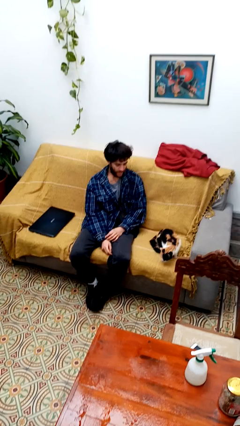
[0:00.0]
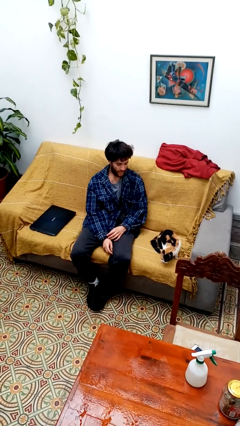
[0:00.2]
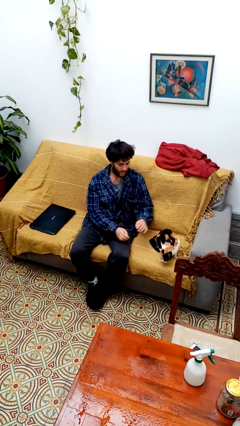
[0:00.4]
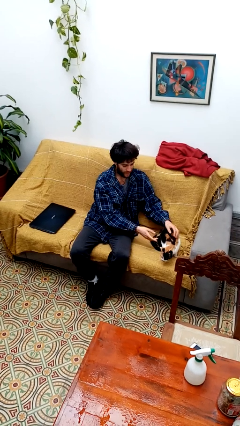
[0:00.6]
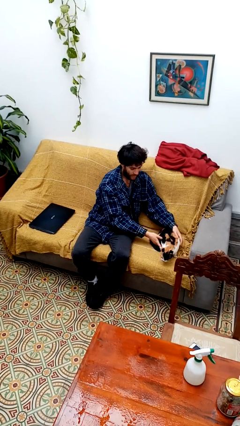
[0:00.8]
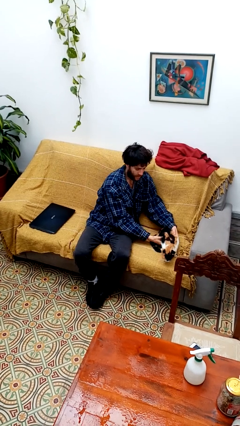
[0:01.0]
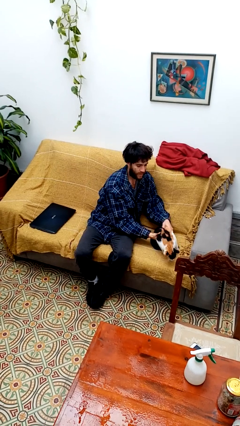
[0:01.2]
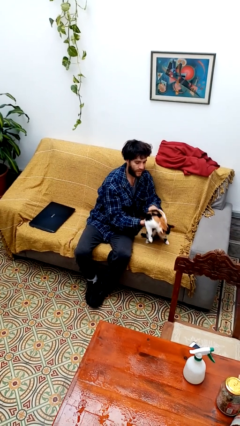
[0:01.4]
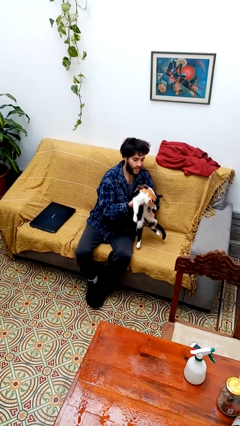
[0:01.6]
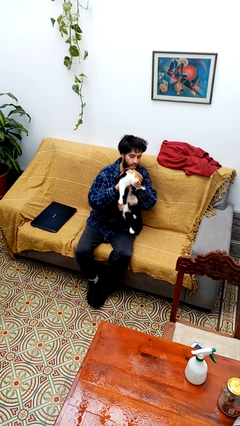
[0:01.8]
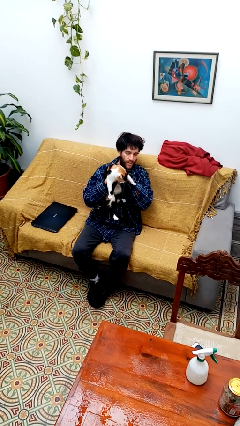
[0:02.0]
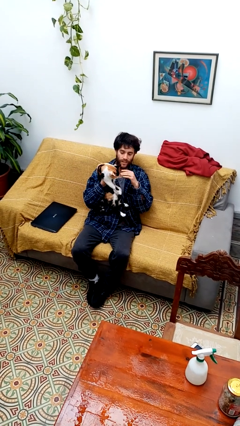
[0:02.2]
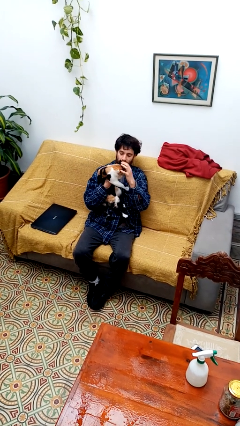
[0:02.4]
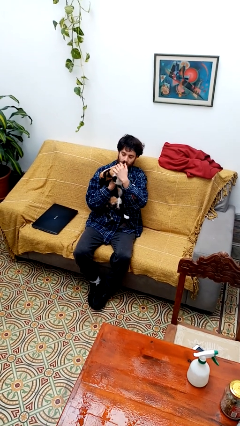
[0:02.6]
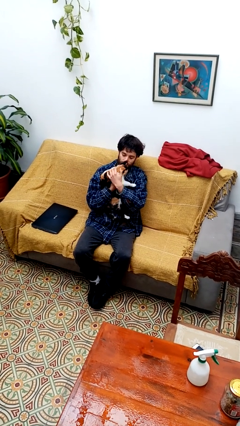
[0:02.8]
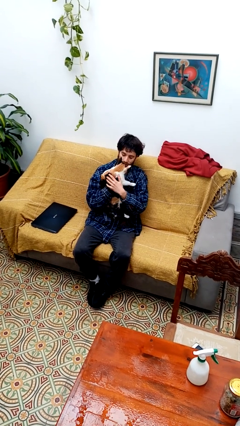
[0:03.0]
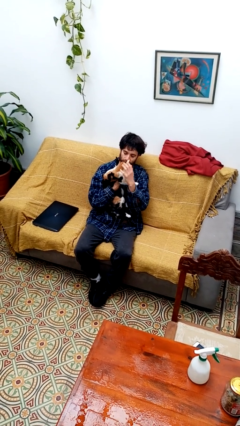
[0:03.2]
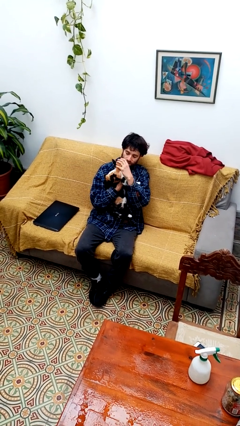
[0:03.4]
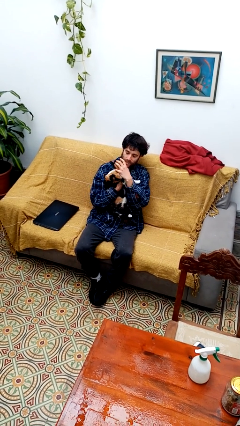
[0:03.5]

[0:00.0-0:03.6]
person hugs cat

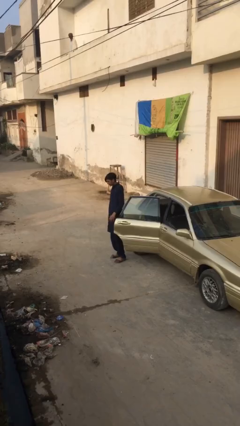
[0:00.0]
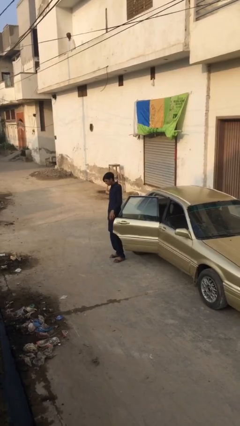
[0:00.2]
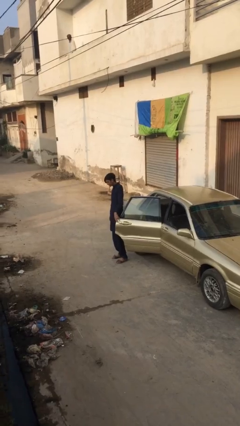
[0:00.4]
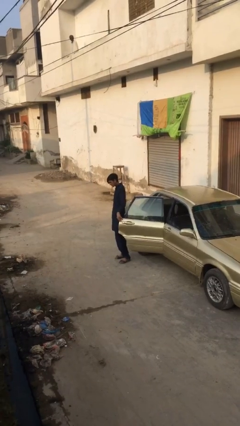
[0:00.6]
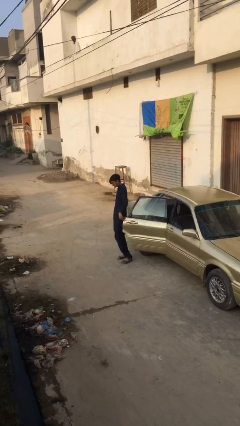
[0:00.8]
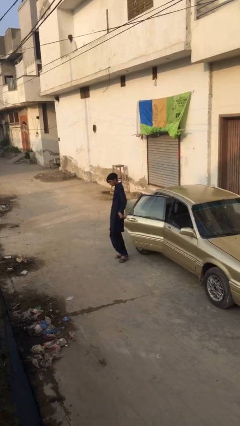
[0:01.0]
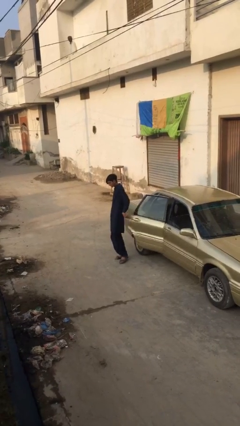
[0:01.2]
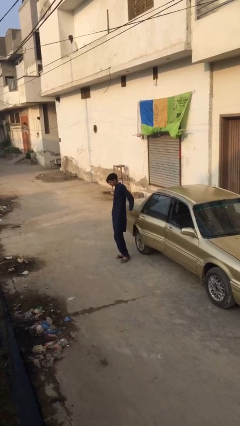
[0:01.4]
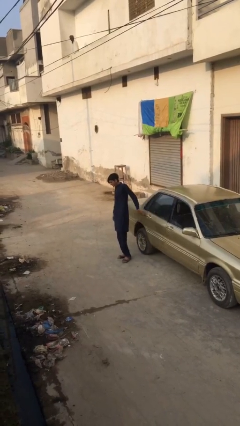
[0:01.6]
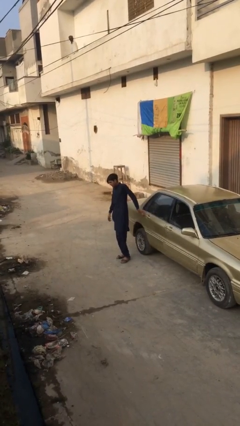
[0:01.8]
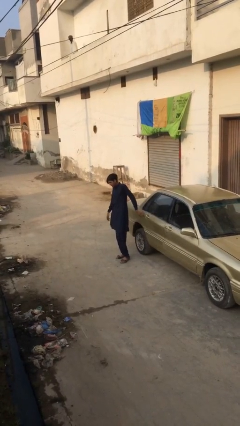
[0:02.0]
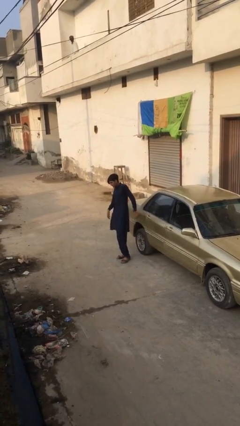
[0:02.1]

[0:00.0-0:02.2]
person closes car door

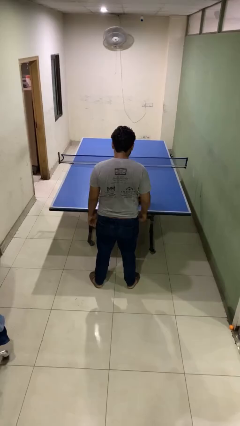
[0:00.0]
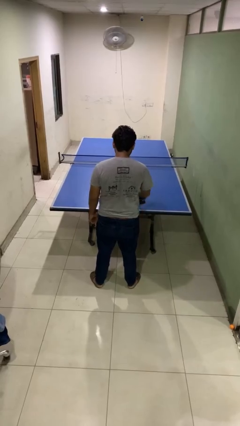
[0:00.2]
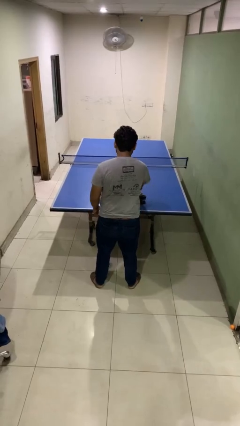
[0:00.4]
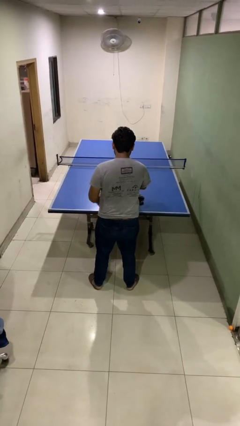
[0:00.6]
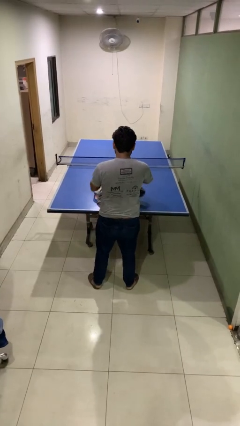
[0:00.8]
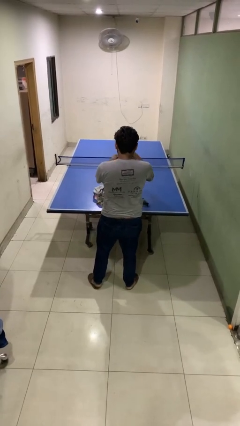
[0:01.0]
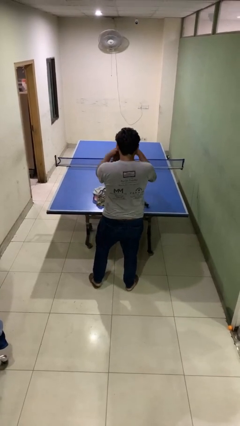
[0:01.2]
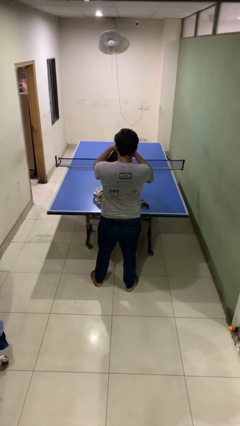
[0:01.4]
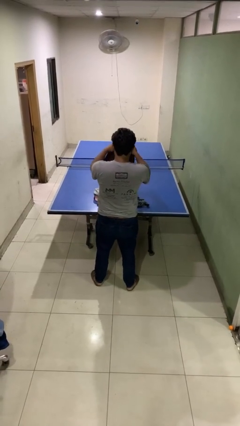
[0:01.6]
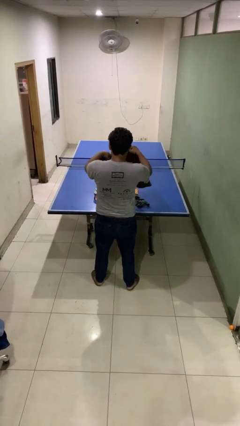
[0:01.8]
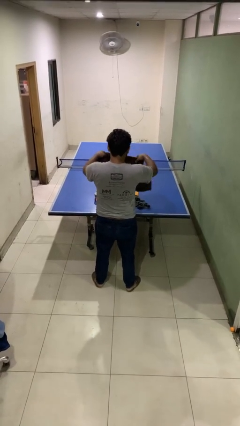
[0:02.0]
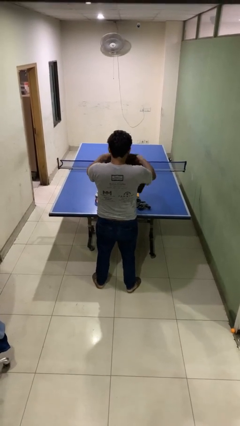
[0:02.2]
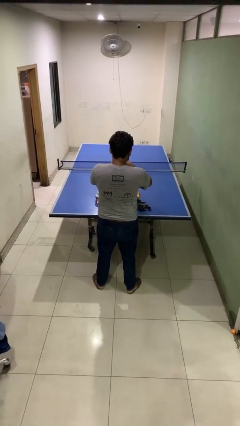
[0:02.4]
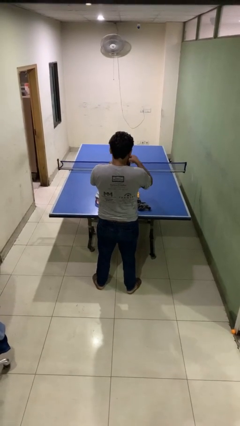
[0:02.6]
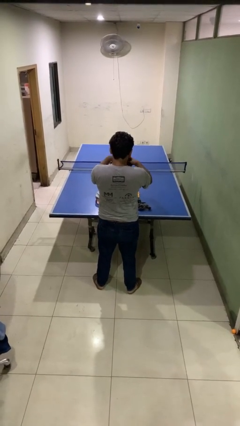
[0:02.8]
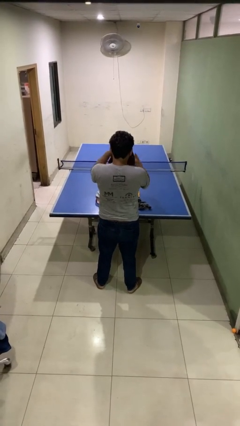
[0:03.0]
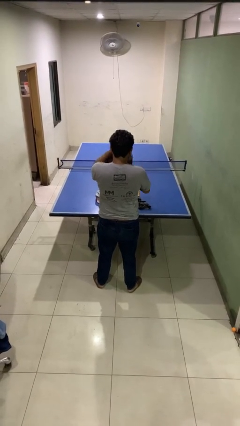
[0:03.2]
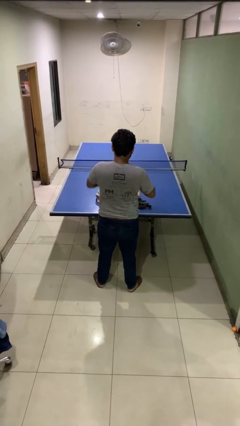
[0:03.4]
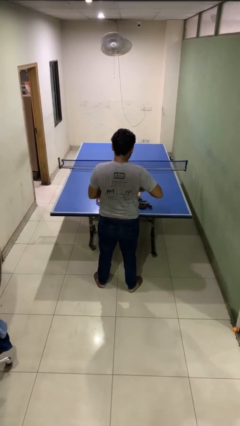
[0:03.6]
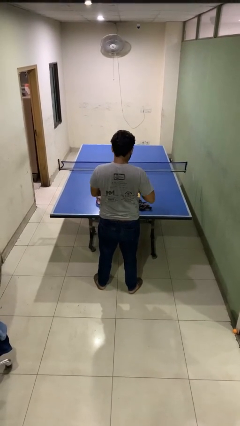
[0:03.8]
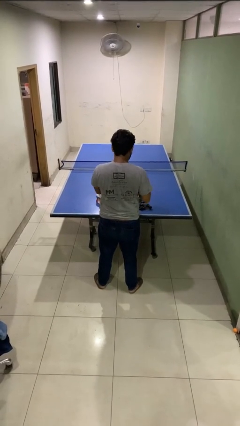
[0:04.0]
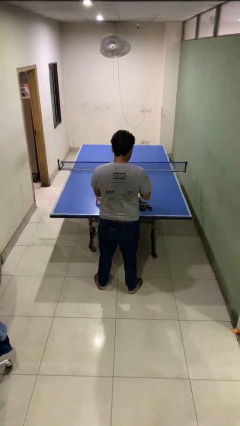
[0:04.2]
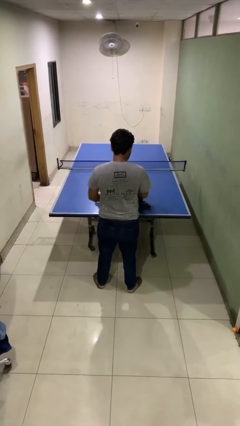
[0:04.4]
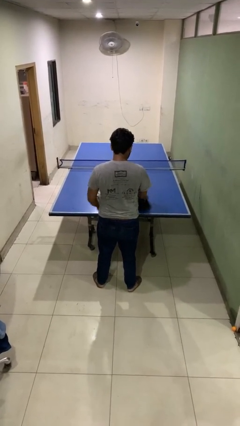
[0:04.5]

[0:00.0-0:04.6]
person folds shirt

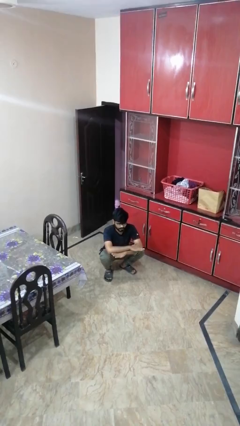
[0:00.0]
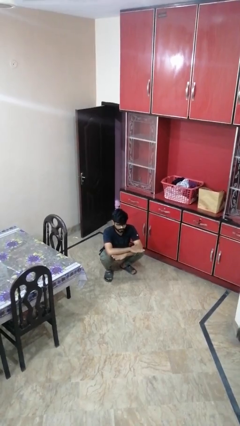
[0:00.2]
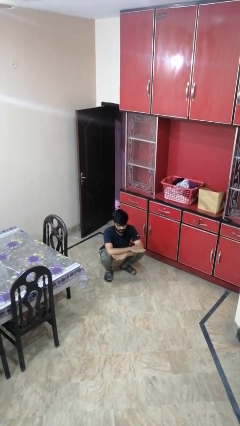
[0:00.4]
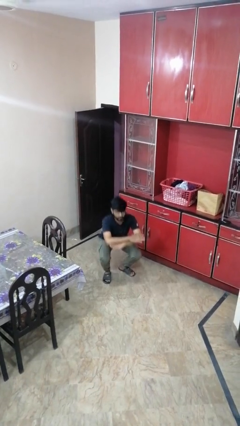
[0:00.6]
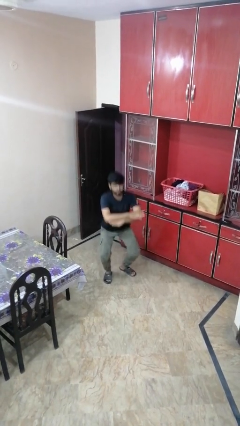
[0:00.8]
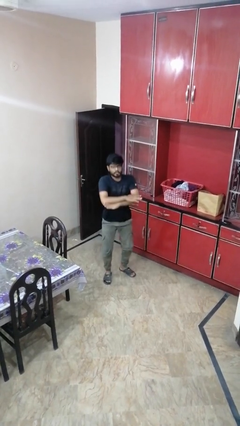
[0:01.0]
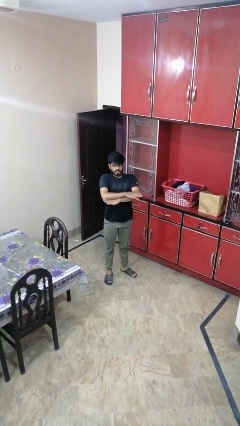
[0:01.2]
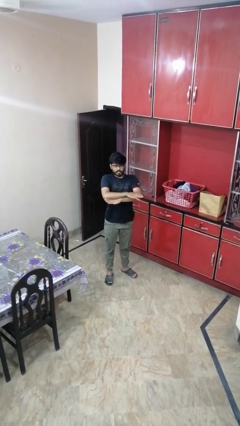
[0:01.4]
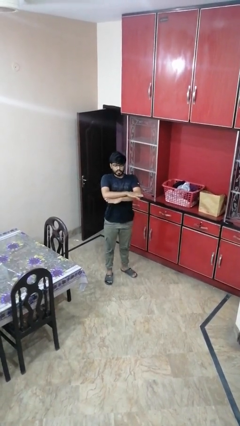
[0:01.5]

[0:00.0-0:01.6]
person stands up

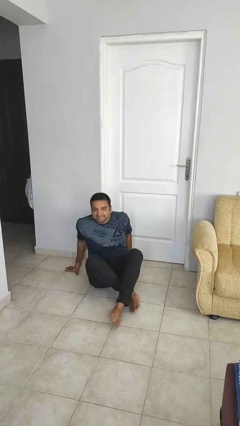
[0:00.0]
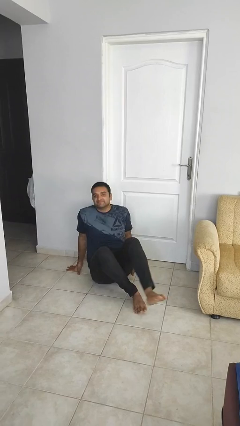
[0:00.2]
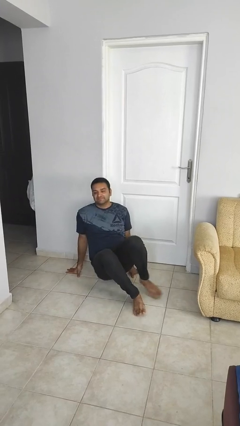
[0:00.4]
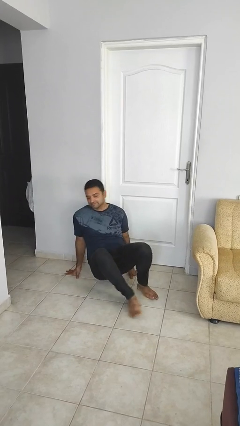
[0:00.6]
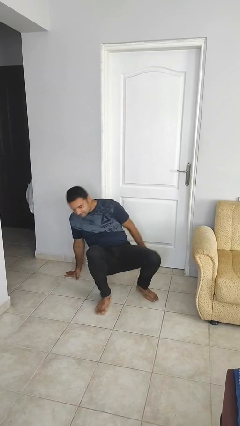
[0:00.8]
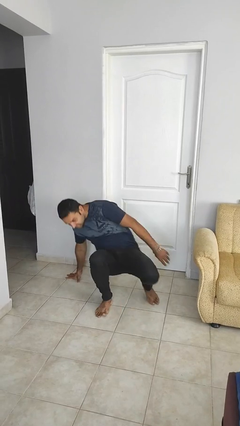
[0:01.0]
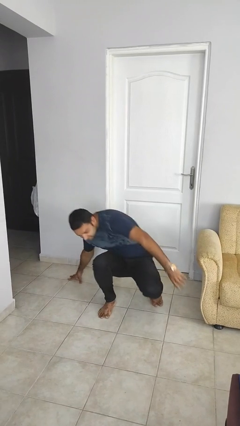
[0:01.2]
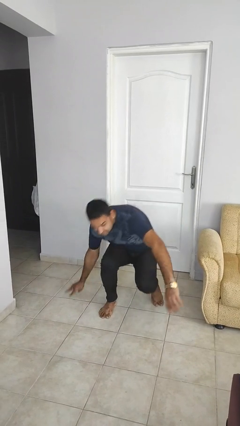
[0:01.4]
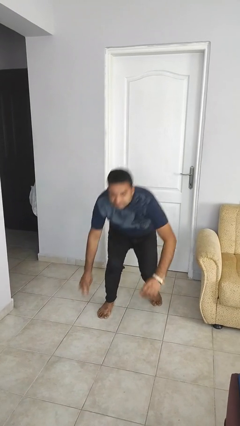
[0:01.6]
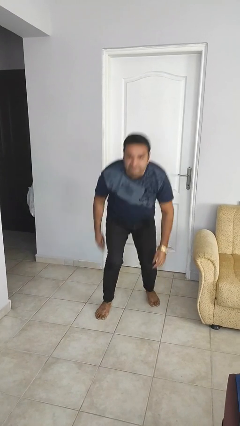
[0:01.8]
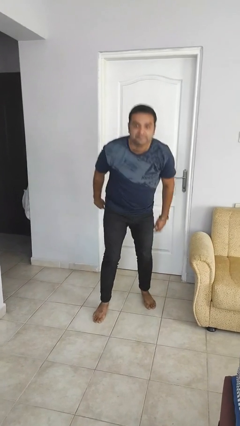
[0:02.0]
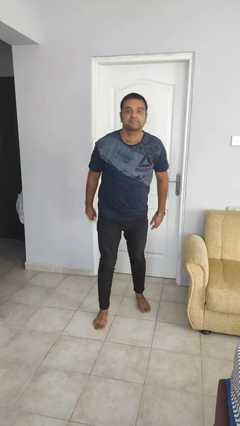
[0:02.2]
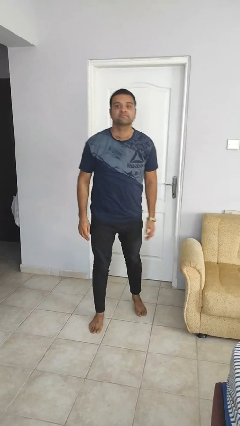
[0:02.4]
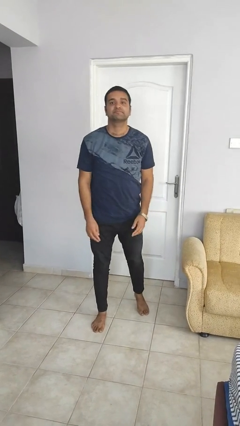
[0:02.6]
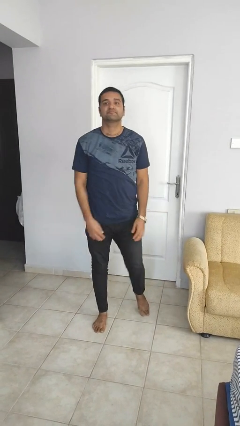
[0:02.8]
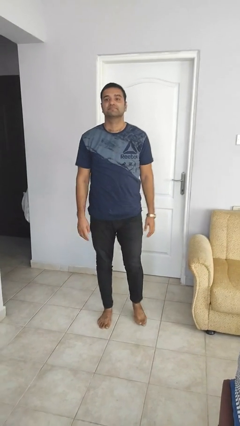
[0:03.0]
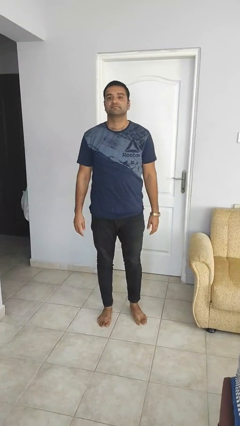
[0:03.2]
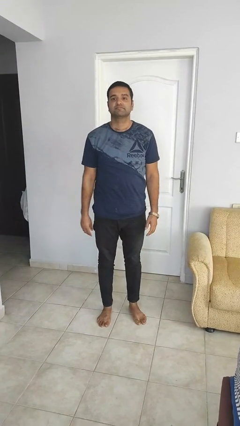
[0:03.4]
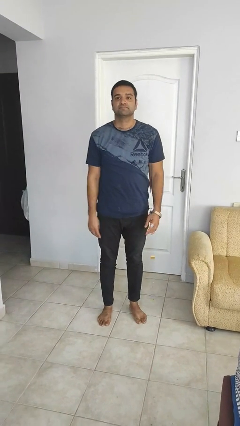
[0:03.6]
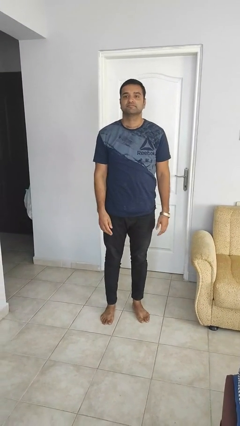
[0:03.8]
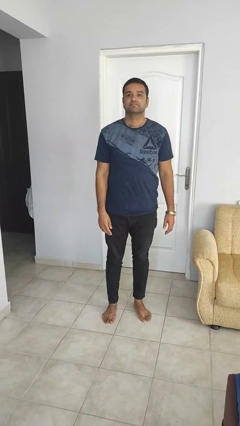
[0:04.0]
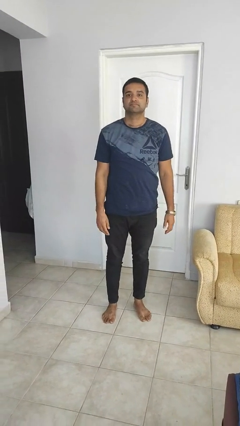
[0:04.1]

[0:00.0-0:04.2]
person stands up from floor

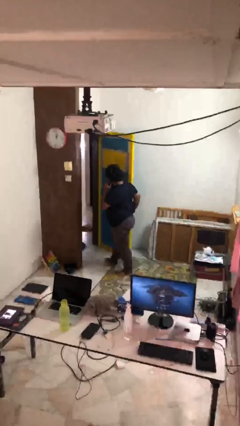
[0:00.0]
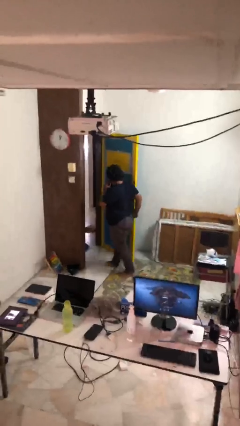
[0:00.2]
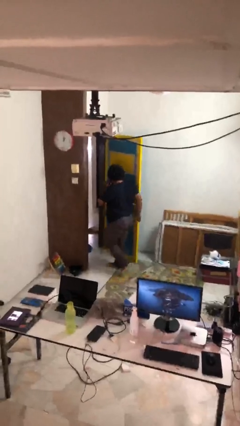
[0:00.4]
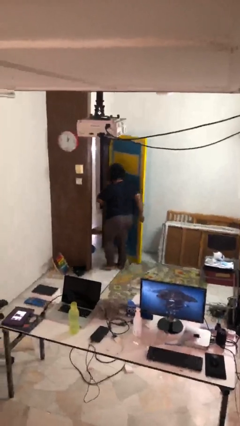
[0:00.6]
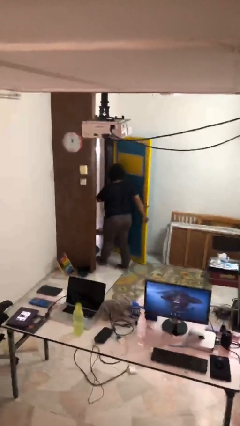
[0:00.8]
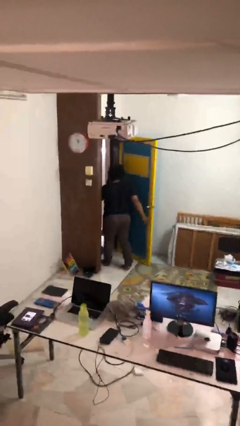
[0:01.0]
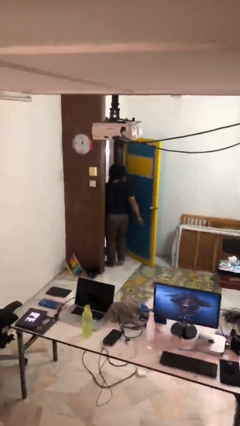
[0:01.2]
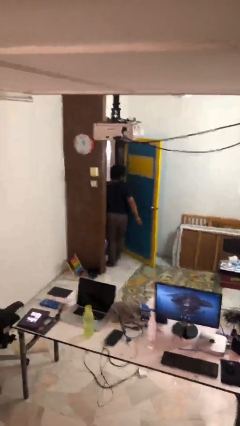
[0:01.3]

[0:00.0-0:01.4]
person exits scene through structure

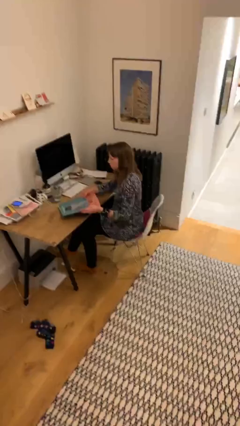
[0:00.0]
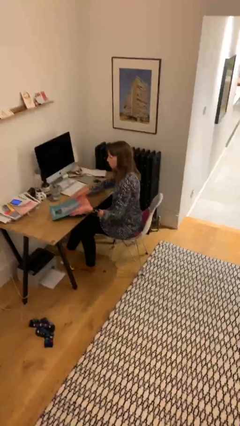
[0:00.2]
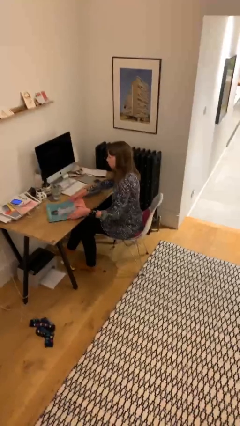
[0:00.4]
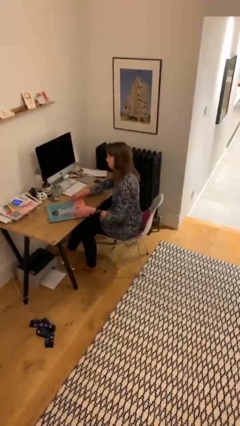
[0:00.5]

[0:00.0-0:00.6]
person puts down object on table
